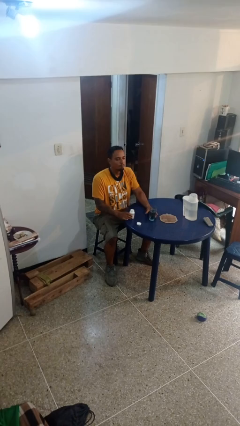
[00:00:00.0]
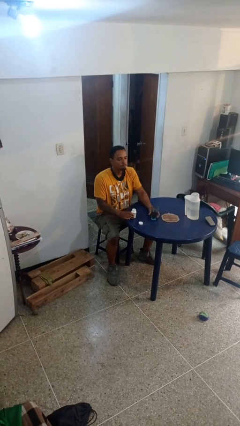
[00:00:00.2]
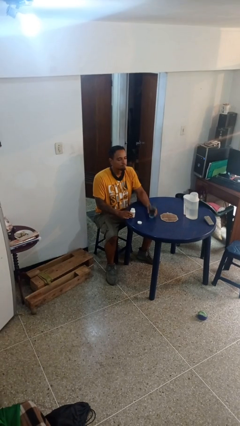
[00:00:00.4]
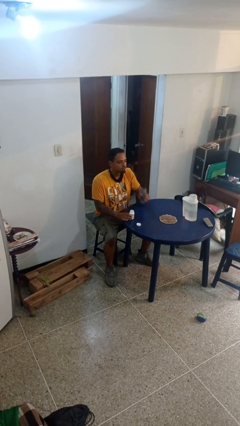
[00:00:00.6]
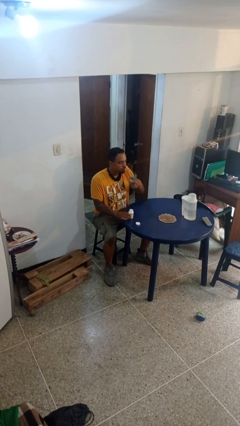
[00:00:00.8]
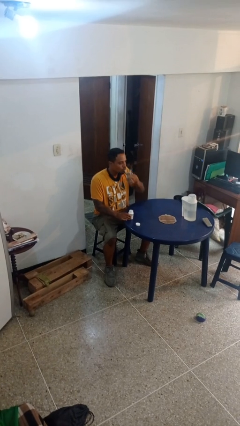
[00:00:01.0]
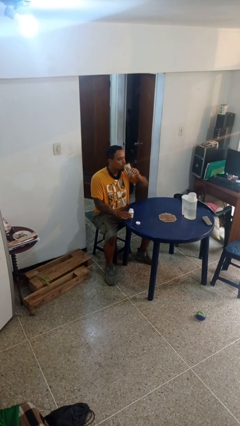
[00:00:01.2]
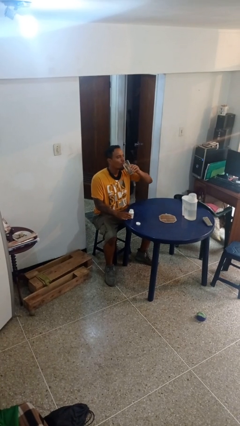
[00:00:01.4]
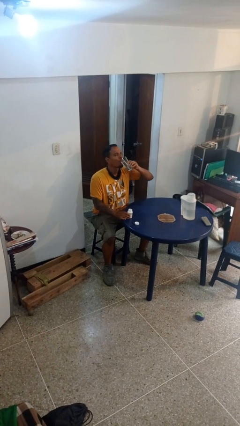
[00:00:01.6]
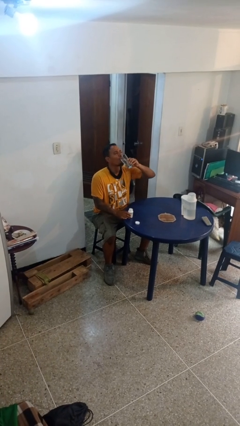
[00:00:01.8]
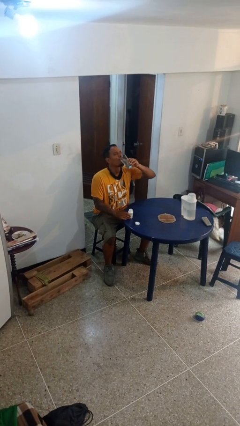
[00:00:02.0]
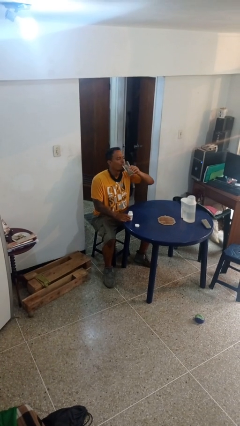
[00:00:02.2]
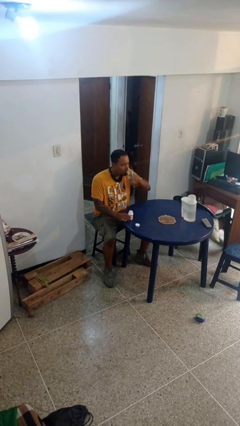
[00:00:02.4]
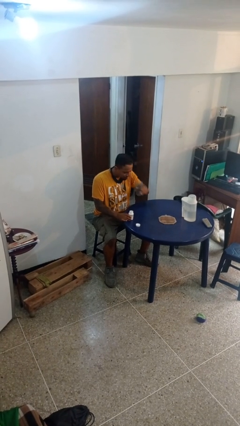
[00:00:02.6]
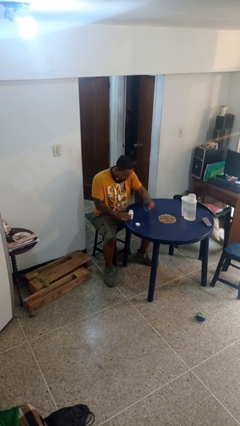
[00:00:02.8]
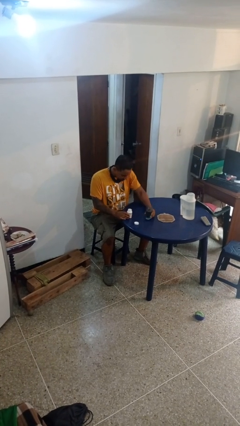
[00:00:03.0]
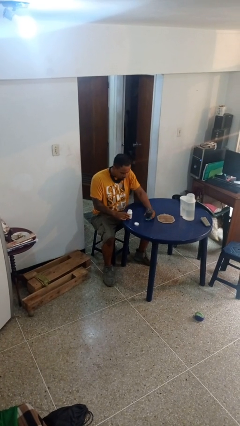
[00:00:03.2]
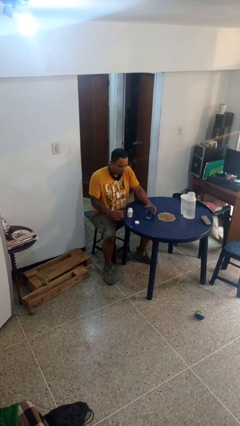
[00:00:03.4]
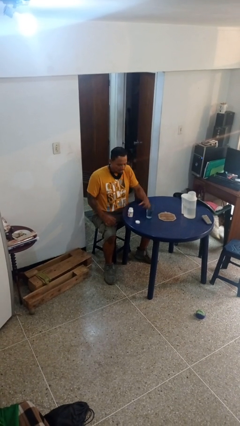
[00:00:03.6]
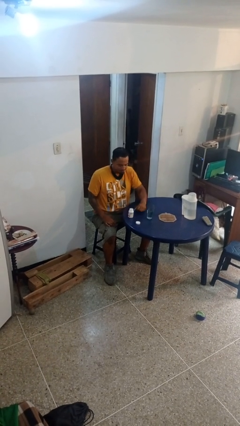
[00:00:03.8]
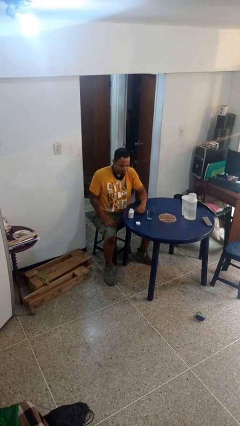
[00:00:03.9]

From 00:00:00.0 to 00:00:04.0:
person drinks from cup

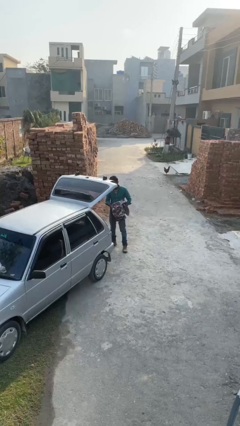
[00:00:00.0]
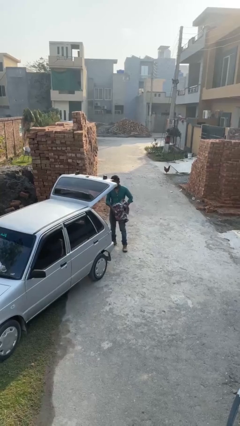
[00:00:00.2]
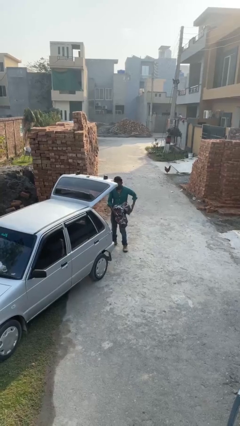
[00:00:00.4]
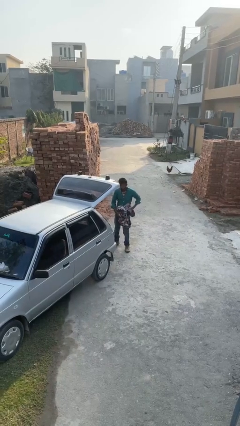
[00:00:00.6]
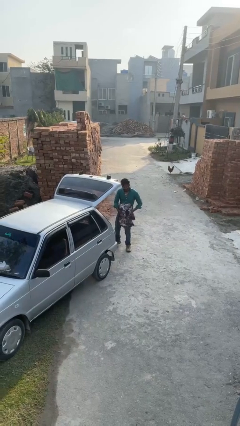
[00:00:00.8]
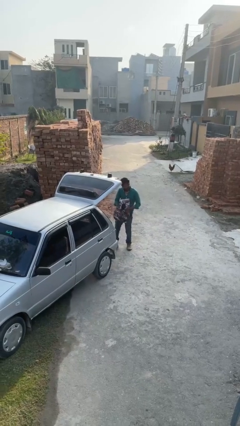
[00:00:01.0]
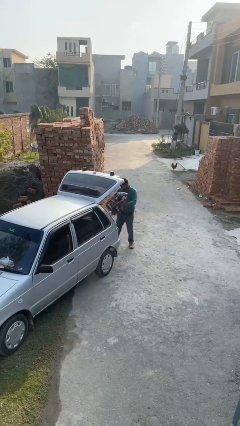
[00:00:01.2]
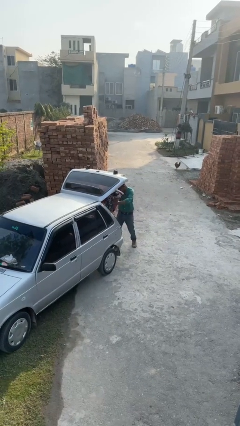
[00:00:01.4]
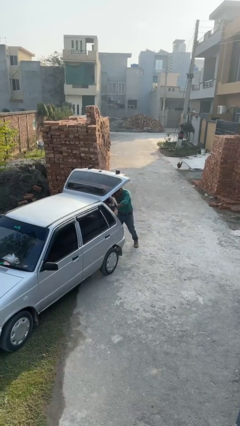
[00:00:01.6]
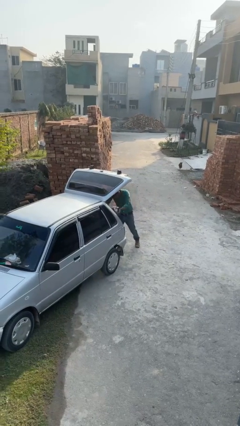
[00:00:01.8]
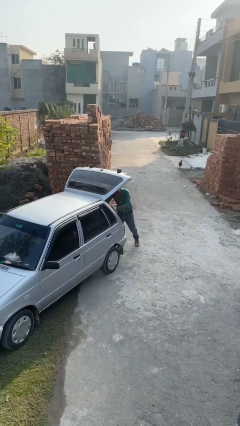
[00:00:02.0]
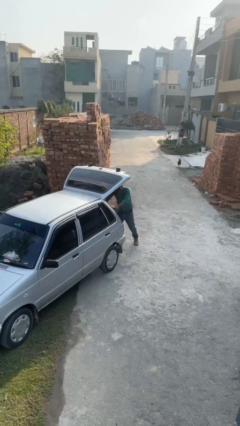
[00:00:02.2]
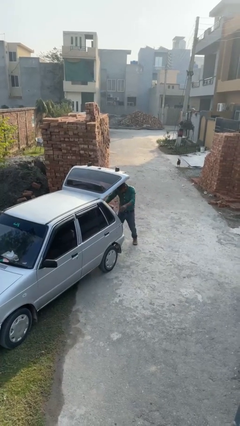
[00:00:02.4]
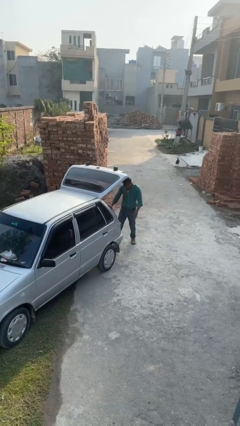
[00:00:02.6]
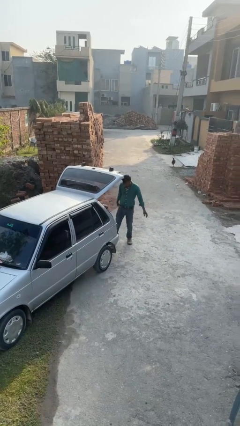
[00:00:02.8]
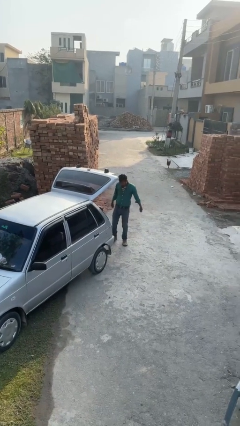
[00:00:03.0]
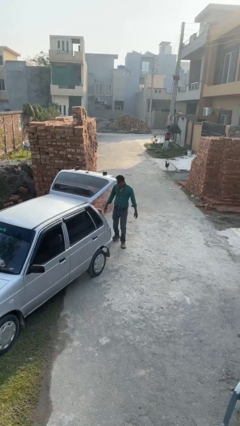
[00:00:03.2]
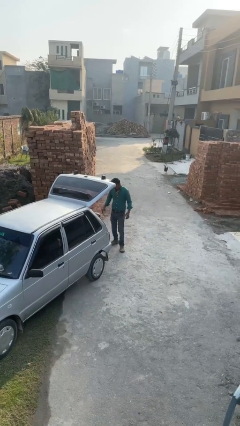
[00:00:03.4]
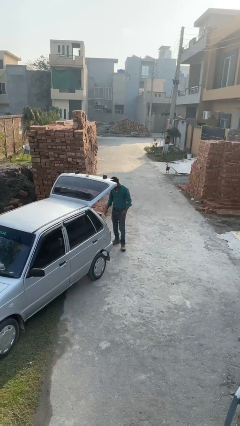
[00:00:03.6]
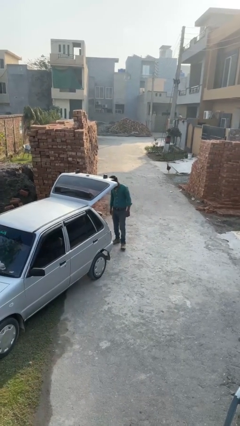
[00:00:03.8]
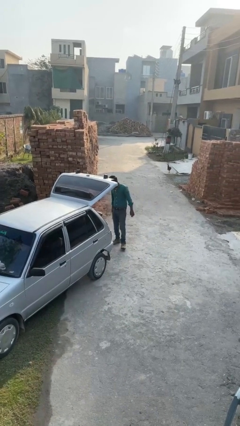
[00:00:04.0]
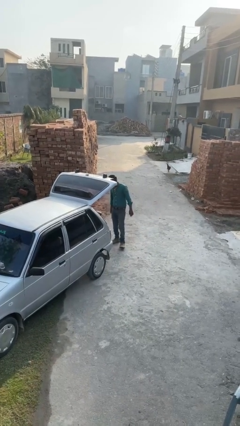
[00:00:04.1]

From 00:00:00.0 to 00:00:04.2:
person loads car

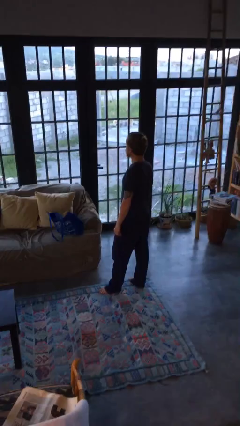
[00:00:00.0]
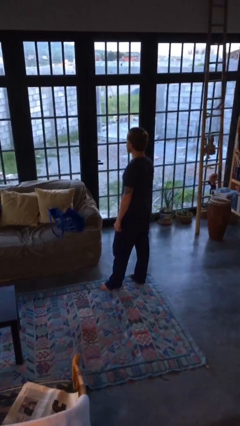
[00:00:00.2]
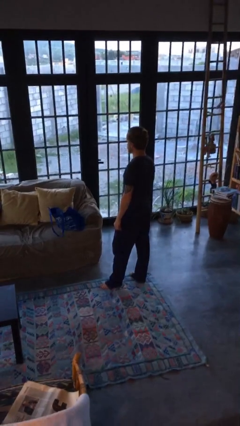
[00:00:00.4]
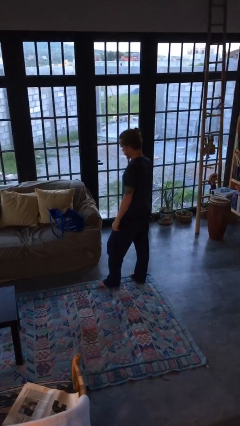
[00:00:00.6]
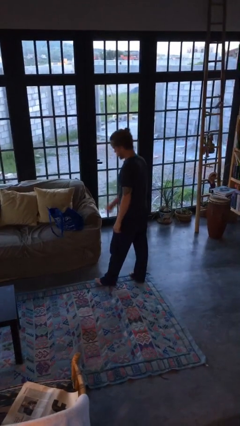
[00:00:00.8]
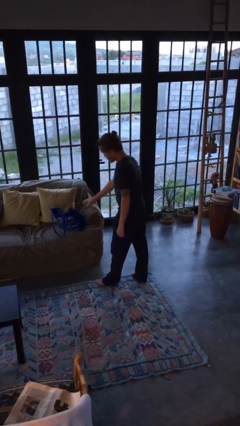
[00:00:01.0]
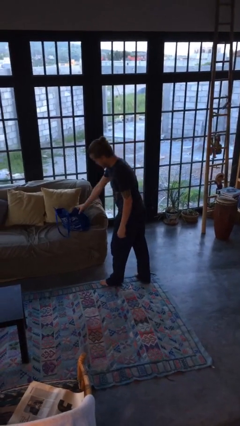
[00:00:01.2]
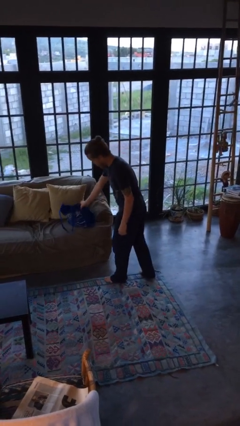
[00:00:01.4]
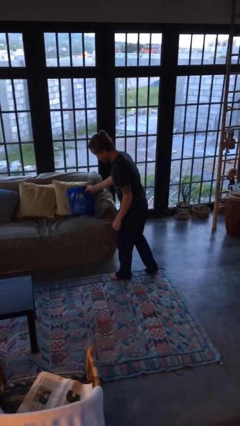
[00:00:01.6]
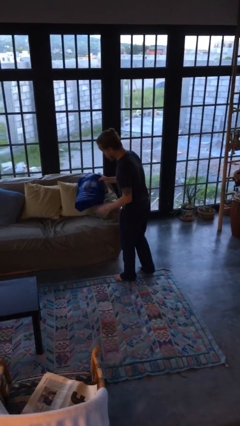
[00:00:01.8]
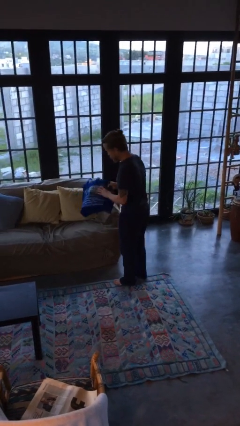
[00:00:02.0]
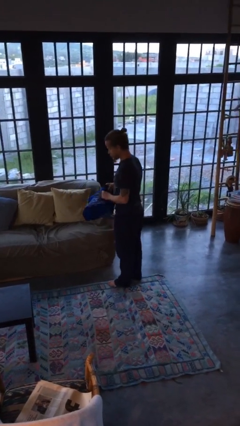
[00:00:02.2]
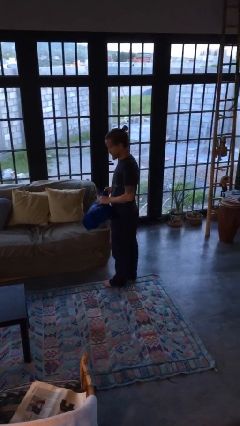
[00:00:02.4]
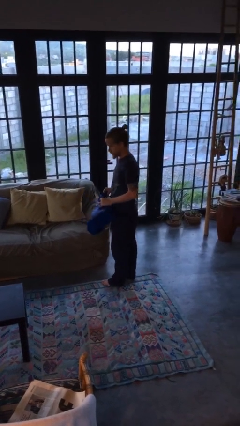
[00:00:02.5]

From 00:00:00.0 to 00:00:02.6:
person picks up object from couch

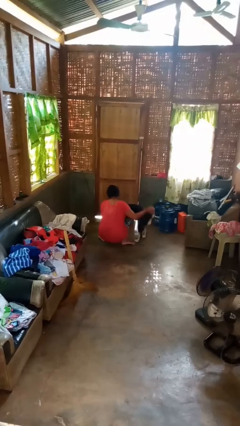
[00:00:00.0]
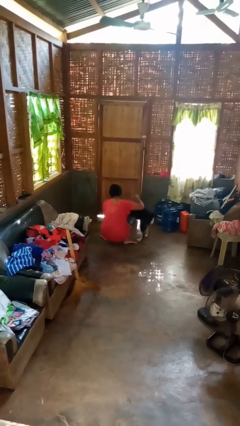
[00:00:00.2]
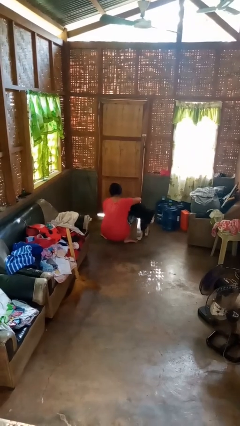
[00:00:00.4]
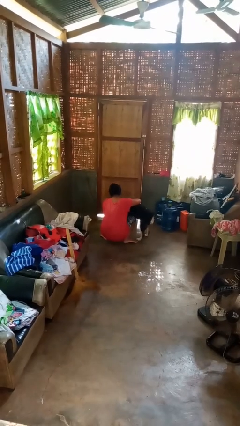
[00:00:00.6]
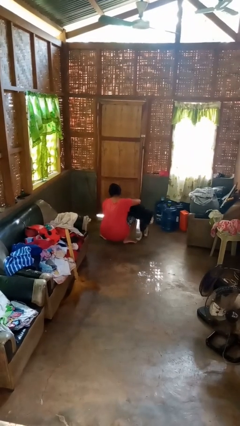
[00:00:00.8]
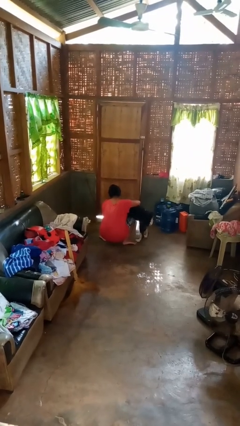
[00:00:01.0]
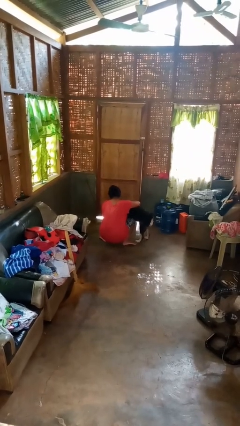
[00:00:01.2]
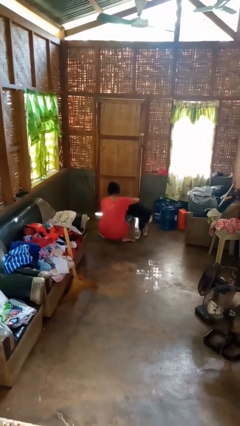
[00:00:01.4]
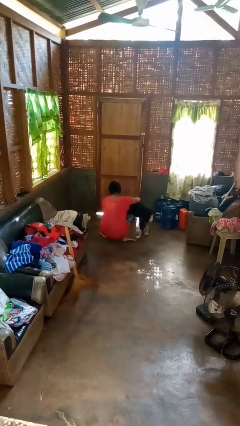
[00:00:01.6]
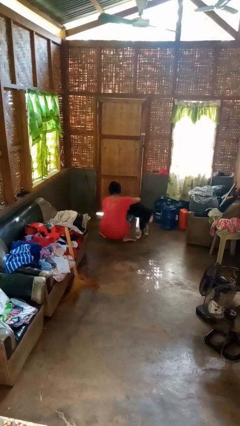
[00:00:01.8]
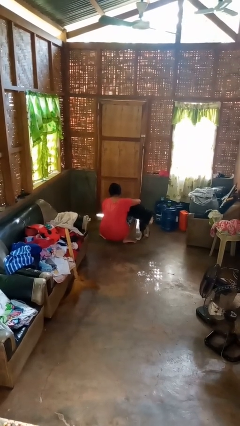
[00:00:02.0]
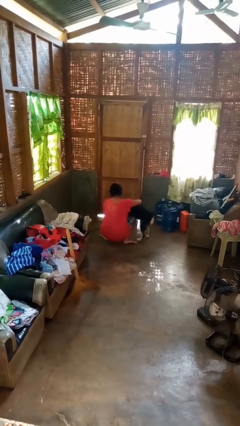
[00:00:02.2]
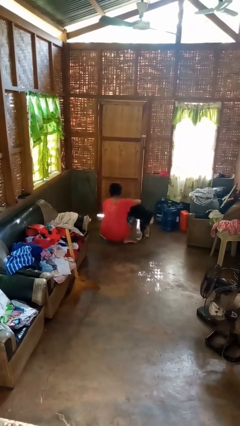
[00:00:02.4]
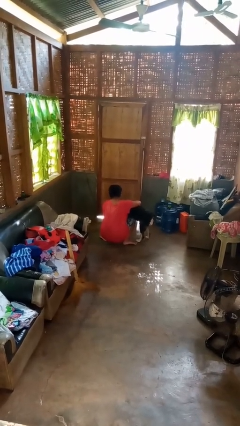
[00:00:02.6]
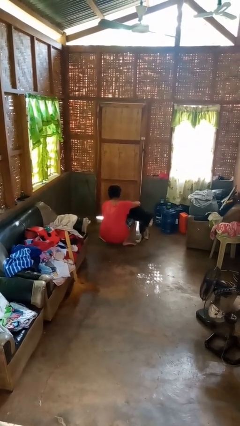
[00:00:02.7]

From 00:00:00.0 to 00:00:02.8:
person hugs dog

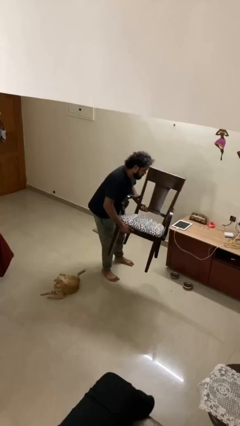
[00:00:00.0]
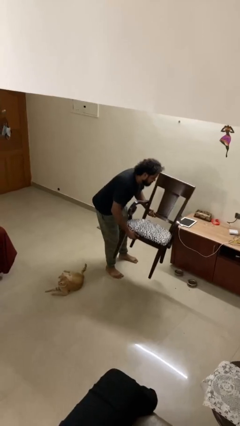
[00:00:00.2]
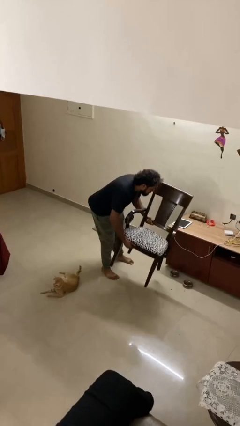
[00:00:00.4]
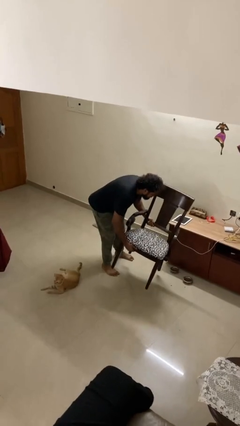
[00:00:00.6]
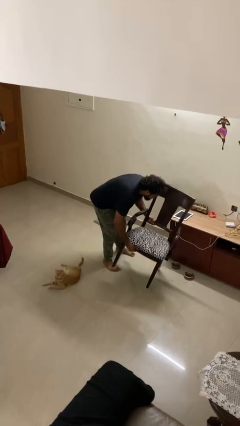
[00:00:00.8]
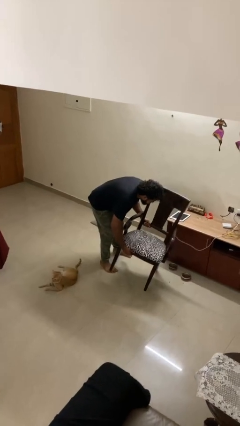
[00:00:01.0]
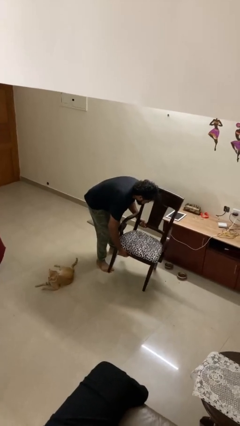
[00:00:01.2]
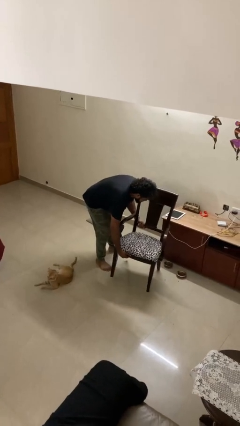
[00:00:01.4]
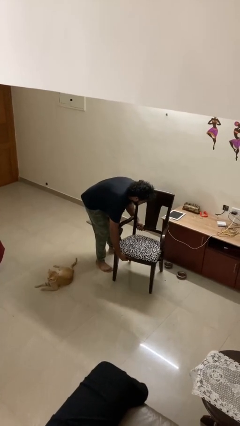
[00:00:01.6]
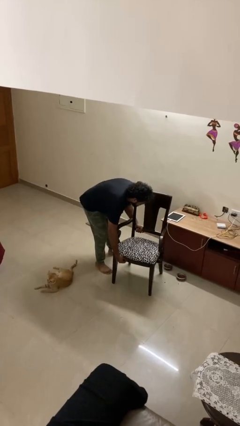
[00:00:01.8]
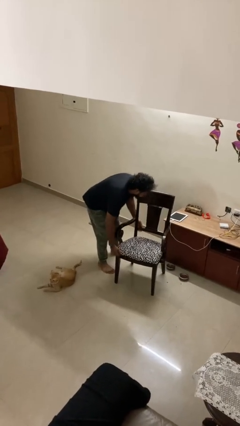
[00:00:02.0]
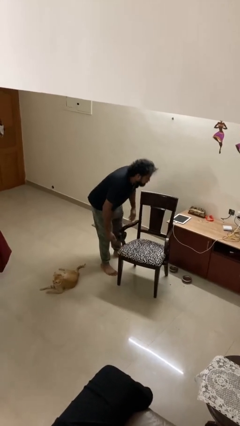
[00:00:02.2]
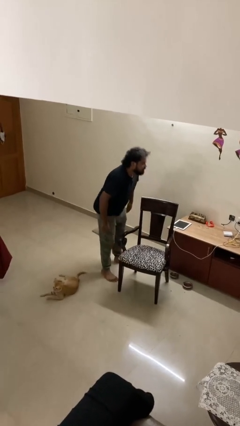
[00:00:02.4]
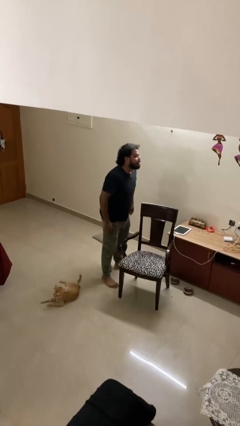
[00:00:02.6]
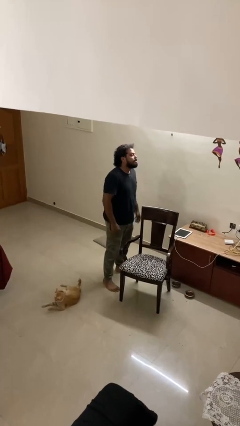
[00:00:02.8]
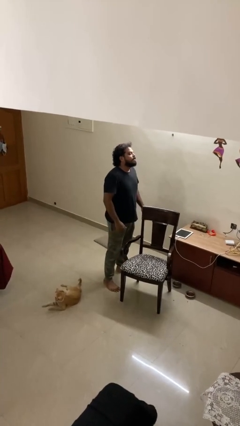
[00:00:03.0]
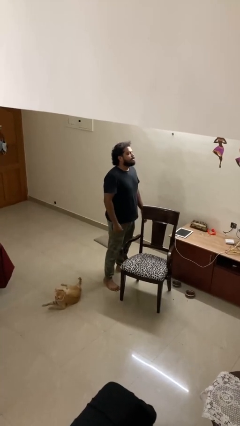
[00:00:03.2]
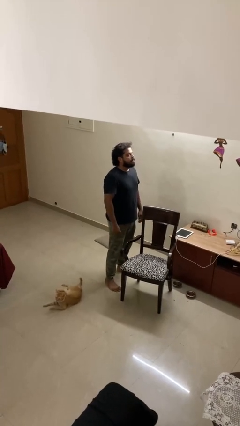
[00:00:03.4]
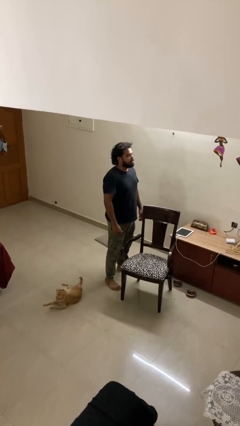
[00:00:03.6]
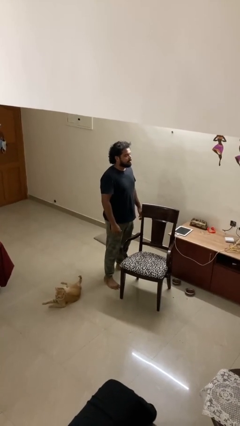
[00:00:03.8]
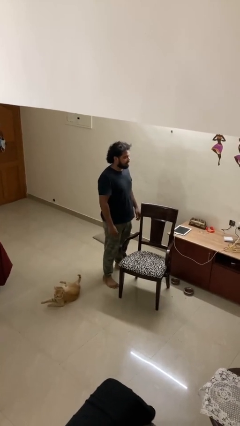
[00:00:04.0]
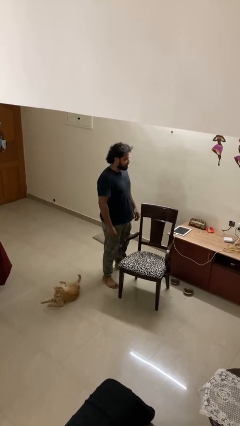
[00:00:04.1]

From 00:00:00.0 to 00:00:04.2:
person puts down object on floor
